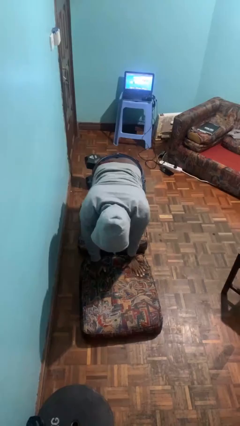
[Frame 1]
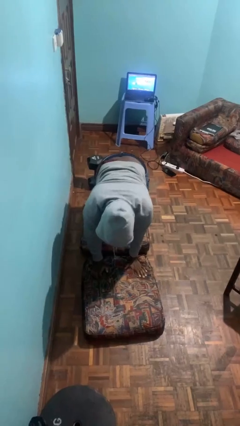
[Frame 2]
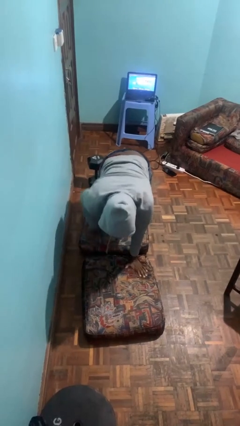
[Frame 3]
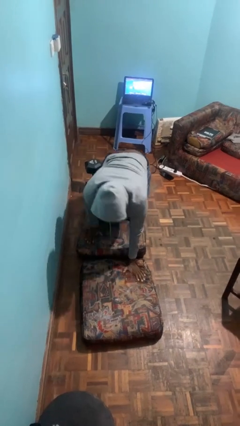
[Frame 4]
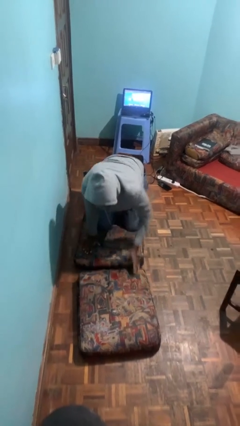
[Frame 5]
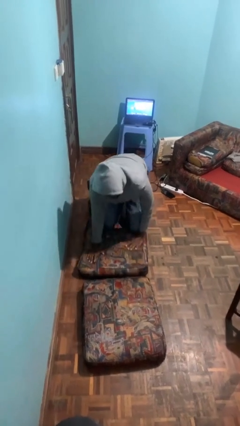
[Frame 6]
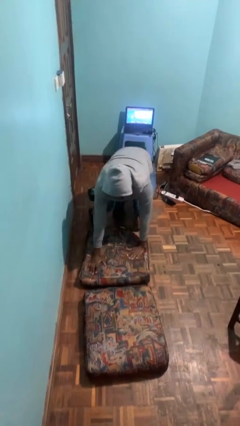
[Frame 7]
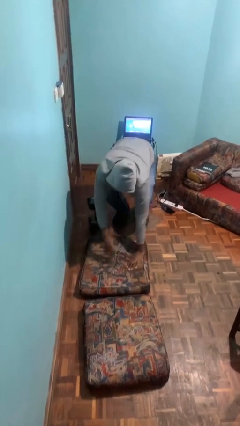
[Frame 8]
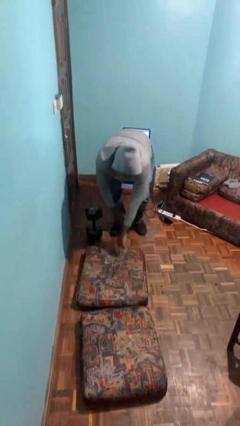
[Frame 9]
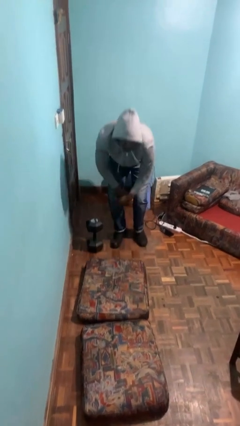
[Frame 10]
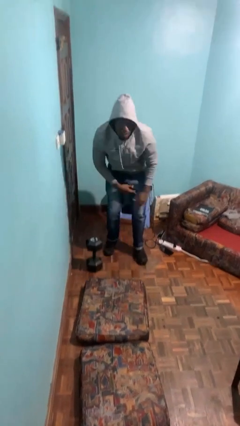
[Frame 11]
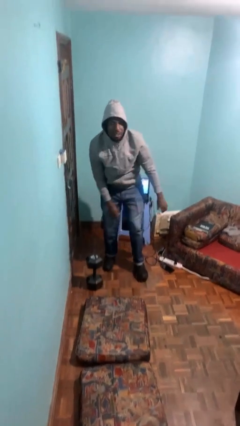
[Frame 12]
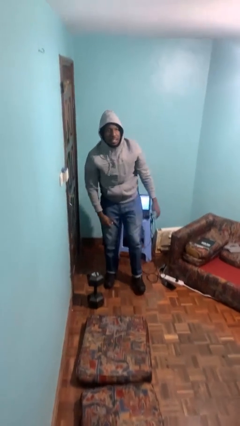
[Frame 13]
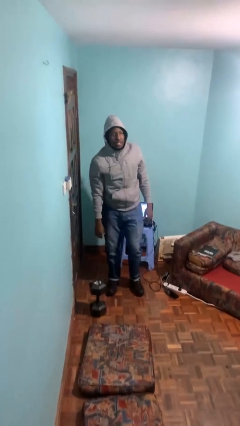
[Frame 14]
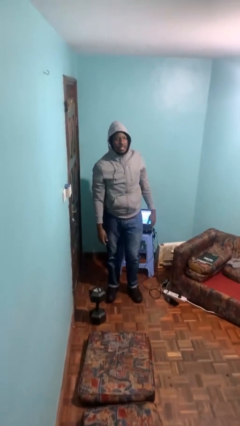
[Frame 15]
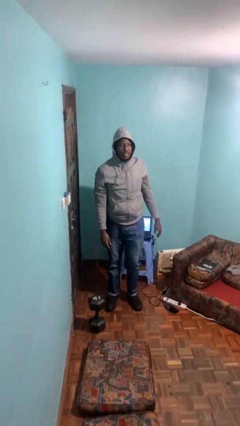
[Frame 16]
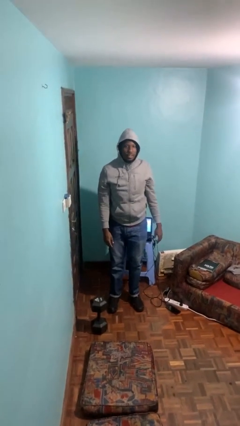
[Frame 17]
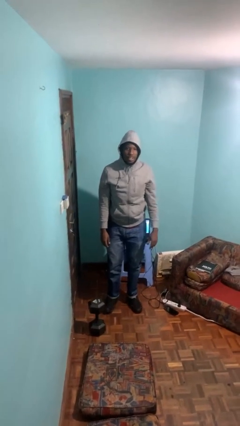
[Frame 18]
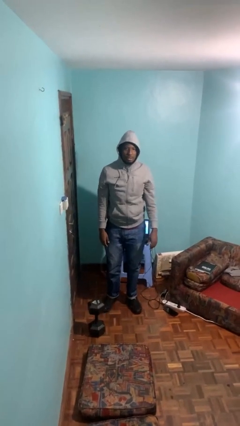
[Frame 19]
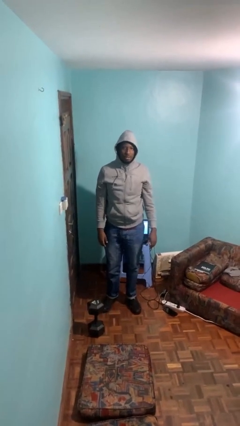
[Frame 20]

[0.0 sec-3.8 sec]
person stands up from floor

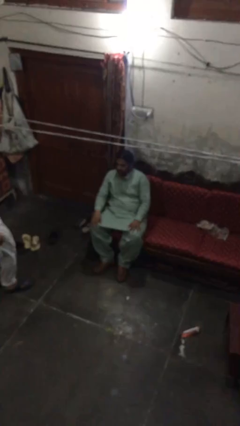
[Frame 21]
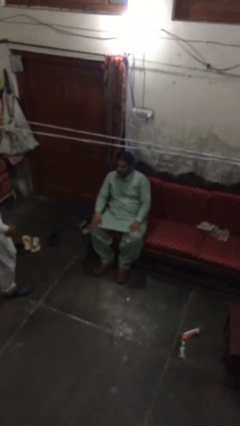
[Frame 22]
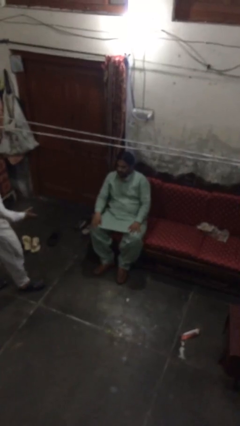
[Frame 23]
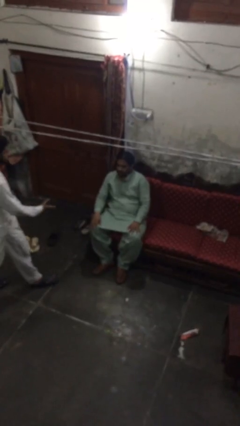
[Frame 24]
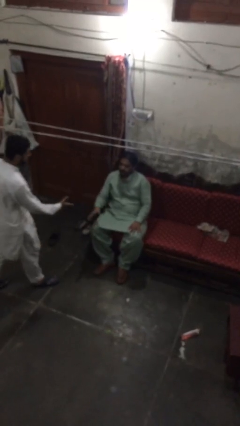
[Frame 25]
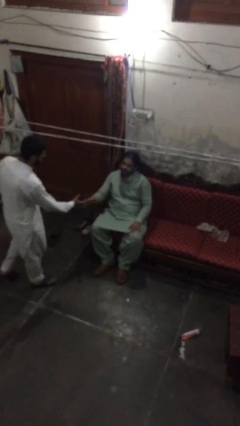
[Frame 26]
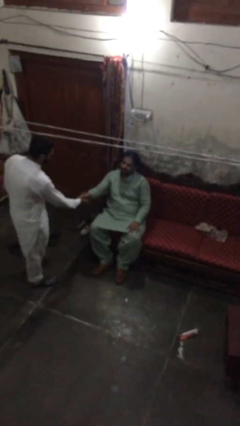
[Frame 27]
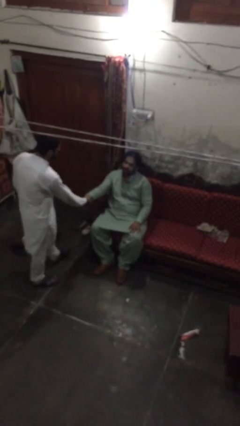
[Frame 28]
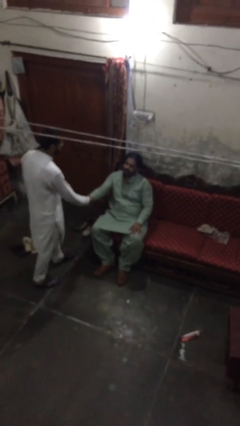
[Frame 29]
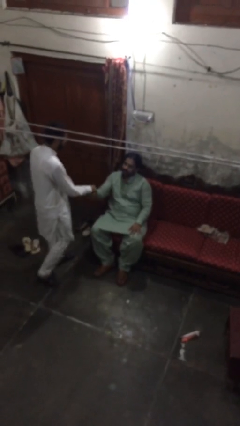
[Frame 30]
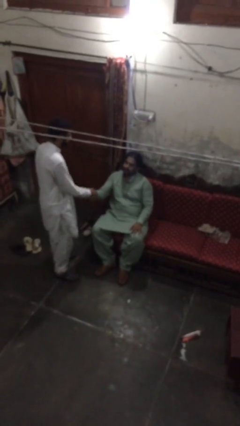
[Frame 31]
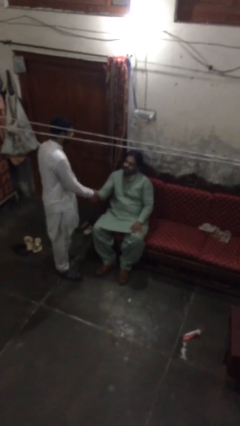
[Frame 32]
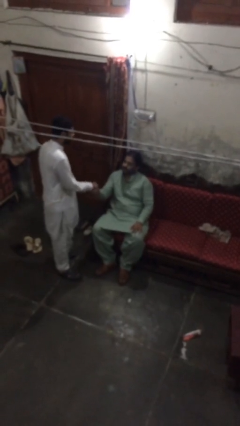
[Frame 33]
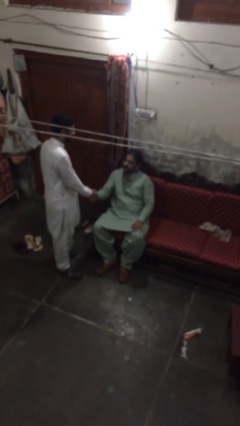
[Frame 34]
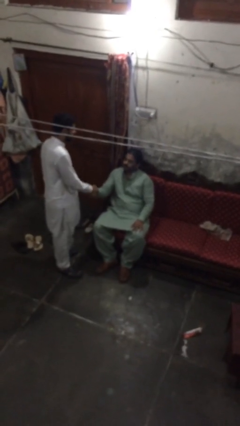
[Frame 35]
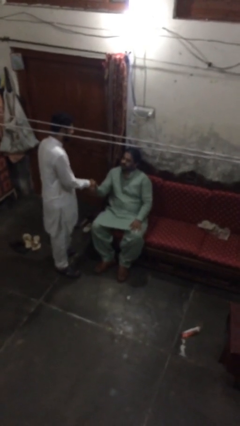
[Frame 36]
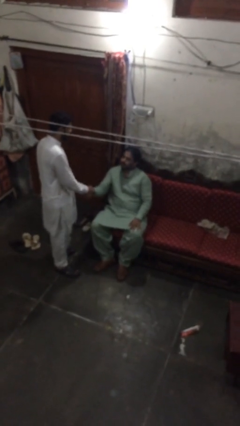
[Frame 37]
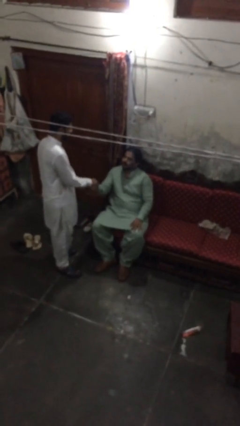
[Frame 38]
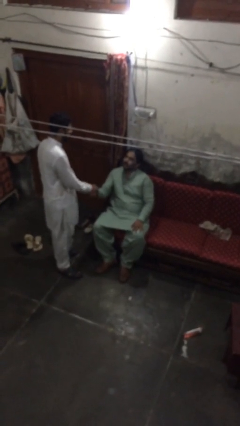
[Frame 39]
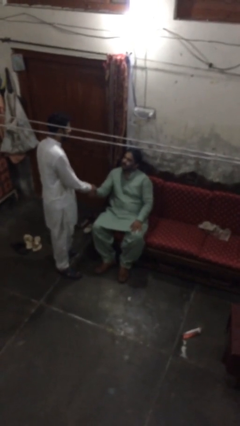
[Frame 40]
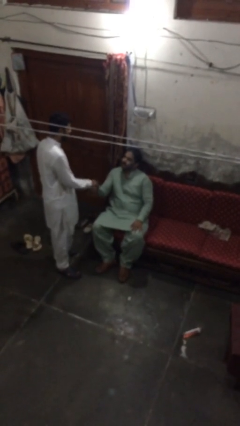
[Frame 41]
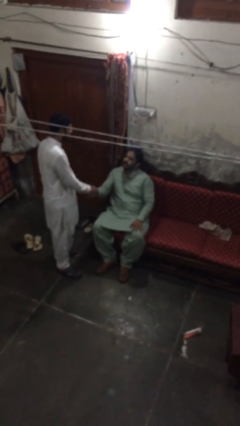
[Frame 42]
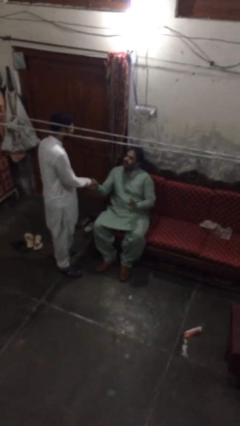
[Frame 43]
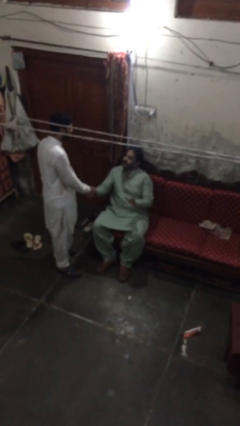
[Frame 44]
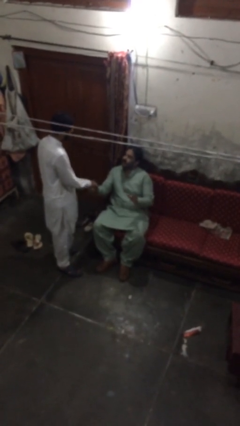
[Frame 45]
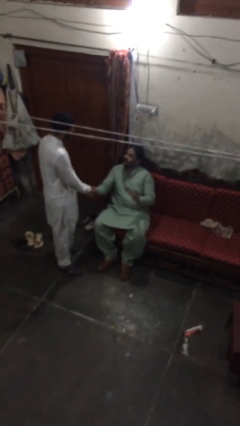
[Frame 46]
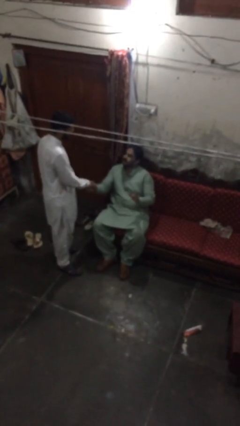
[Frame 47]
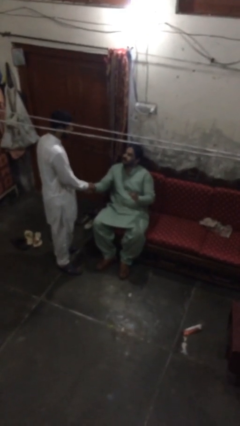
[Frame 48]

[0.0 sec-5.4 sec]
person shakes hand

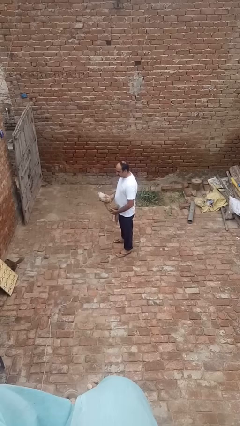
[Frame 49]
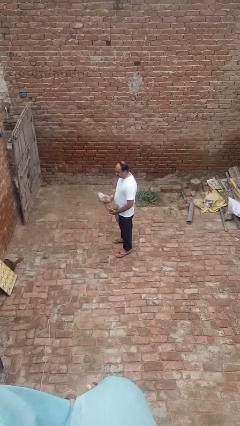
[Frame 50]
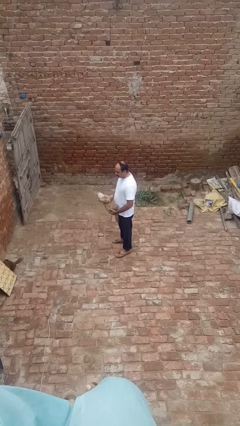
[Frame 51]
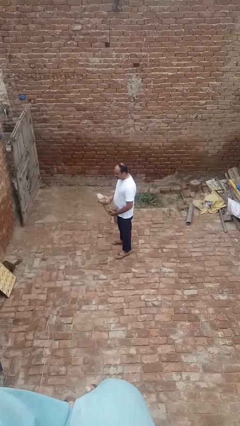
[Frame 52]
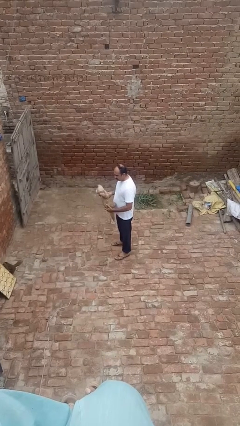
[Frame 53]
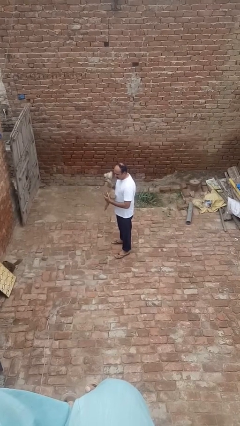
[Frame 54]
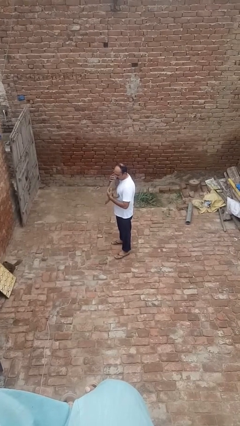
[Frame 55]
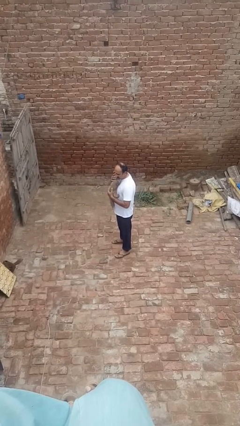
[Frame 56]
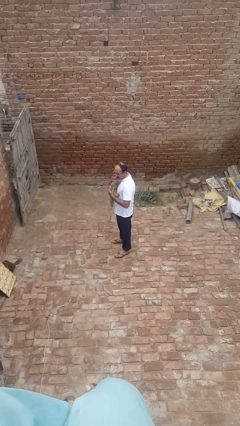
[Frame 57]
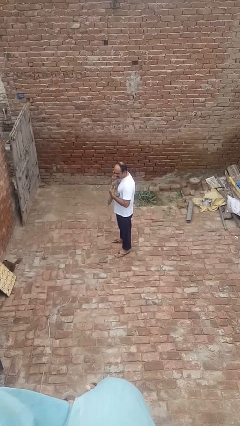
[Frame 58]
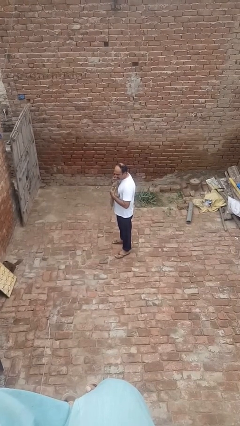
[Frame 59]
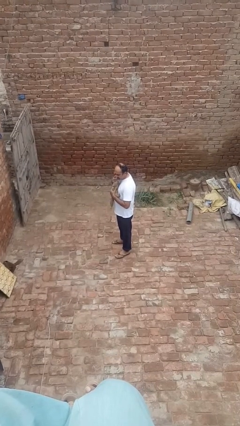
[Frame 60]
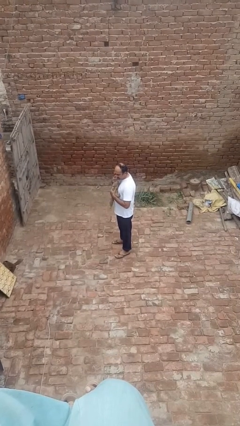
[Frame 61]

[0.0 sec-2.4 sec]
person hugs stuffed animal

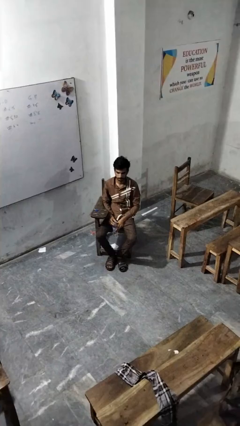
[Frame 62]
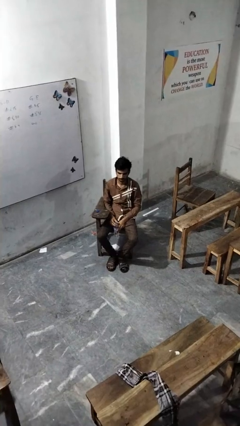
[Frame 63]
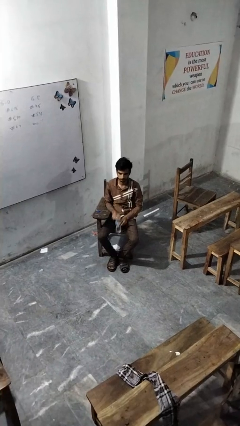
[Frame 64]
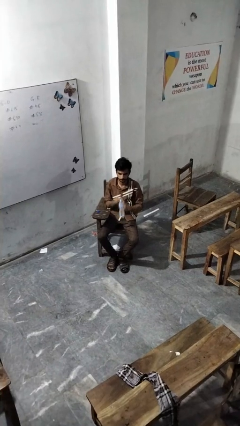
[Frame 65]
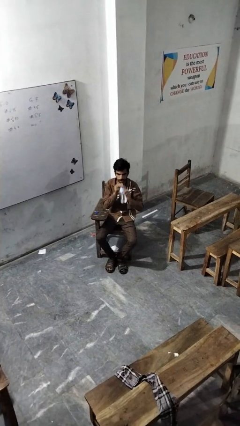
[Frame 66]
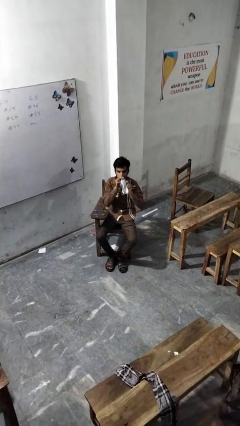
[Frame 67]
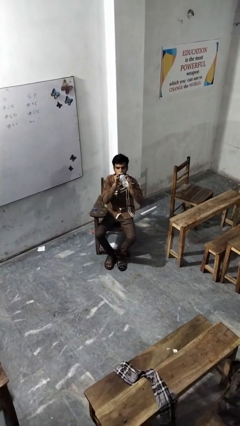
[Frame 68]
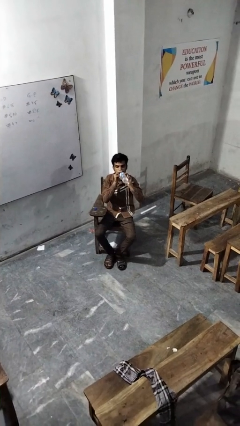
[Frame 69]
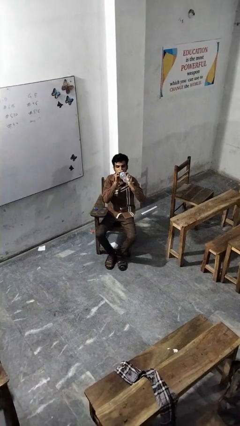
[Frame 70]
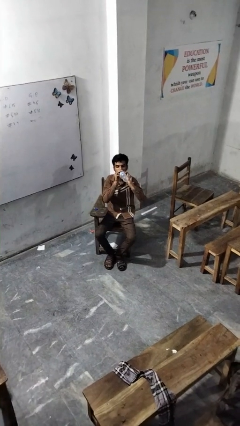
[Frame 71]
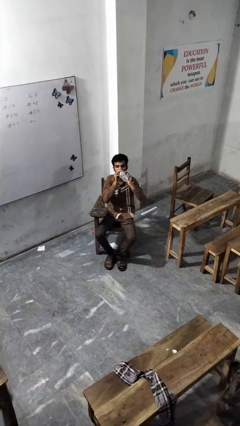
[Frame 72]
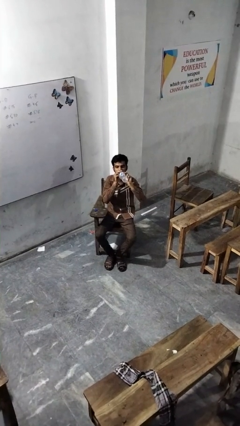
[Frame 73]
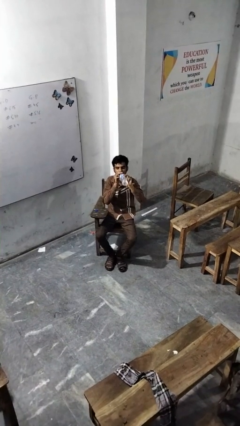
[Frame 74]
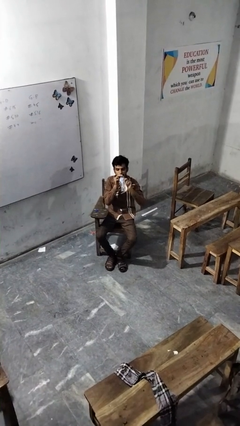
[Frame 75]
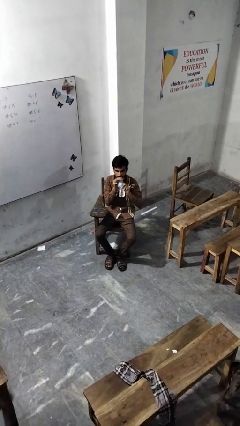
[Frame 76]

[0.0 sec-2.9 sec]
person drinks from bottle

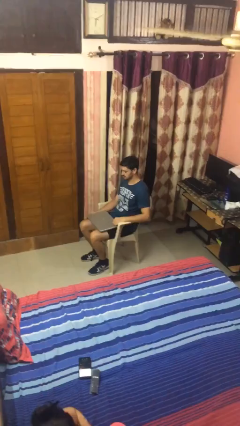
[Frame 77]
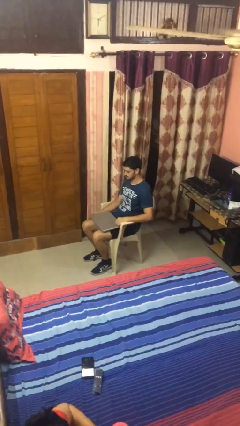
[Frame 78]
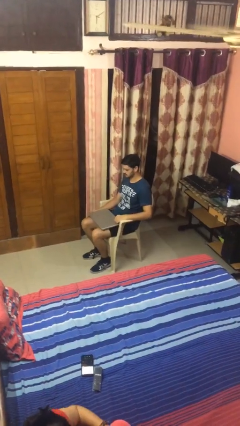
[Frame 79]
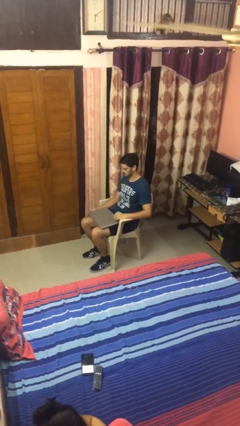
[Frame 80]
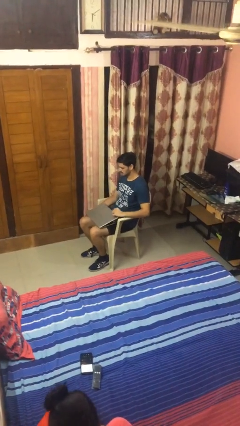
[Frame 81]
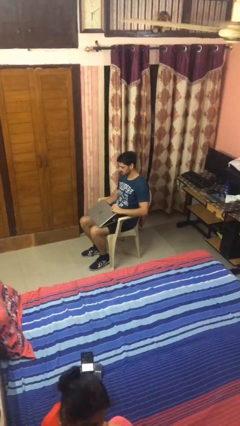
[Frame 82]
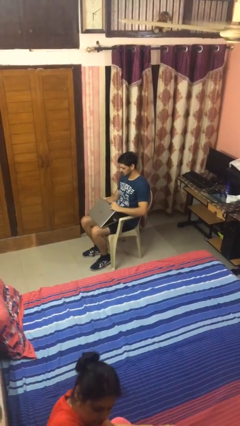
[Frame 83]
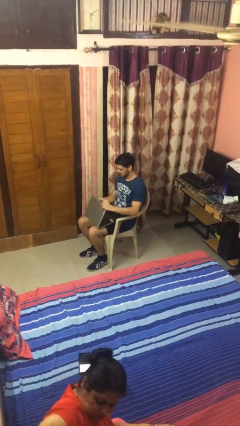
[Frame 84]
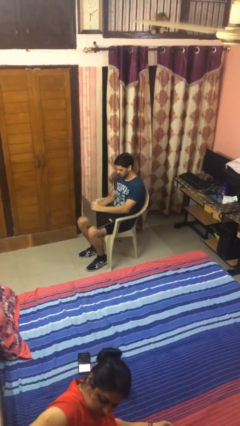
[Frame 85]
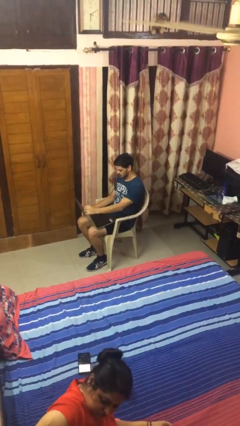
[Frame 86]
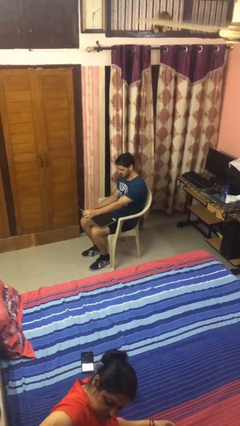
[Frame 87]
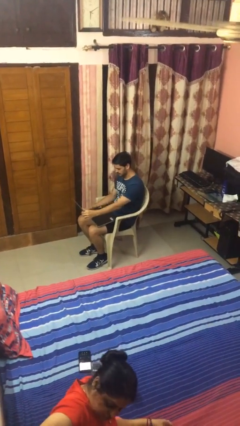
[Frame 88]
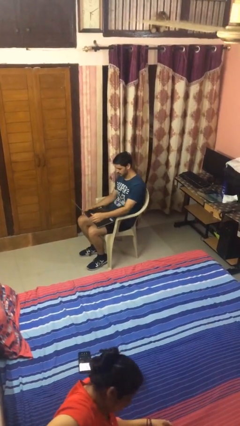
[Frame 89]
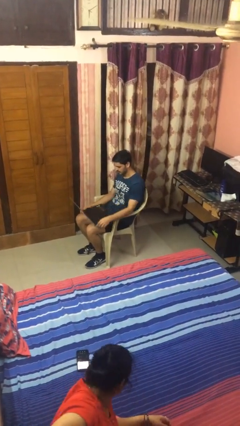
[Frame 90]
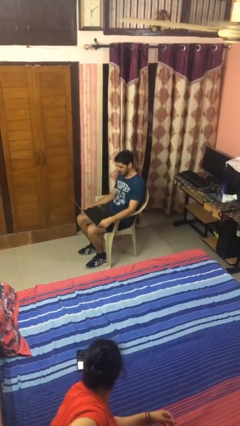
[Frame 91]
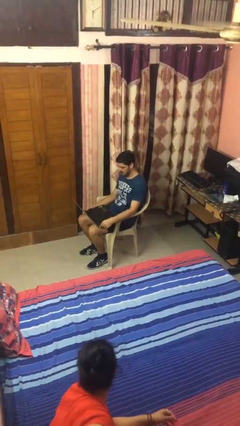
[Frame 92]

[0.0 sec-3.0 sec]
person opens laptop

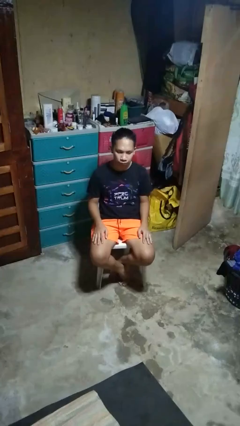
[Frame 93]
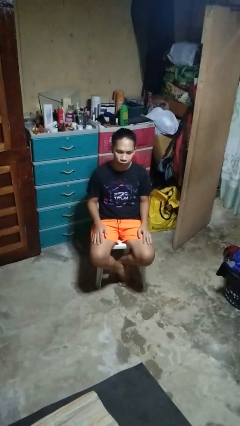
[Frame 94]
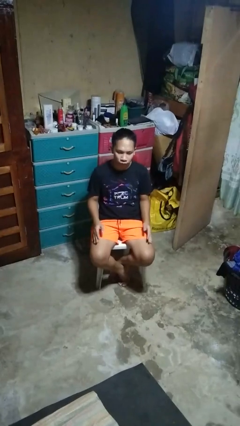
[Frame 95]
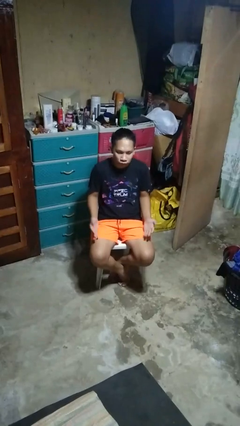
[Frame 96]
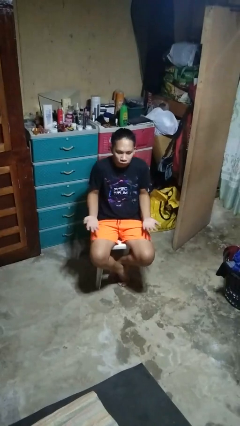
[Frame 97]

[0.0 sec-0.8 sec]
person shrugs
